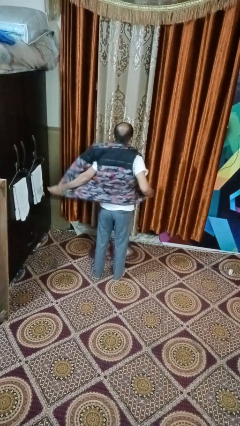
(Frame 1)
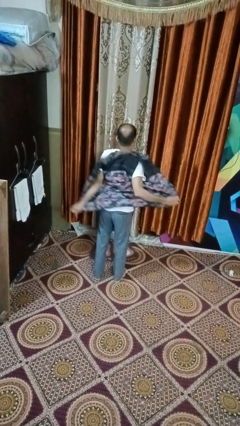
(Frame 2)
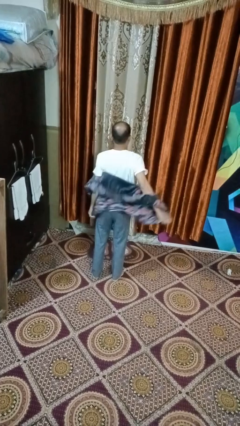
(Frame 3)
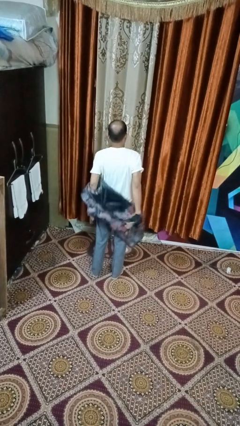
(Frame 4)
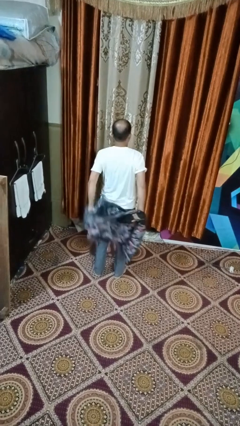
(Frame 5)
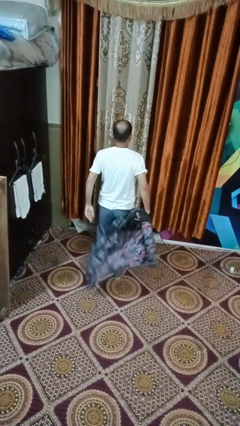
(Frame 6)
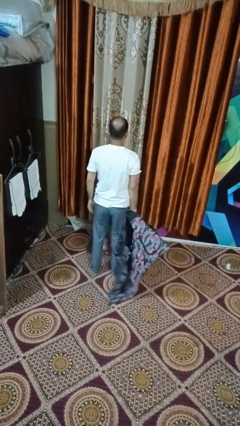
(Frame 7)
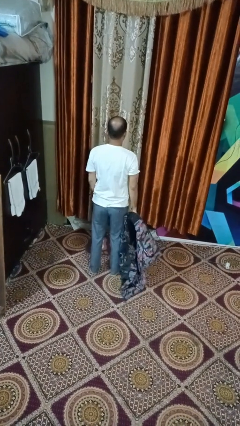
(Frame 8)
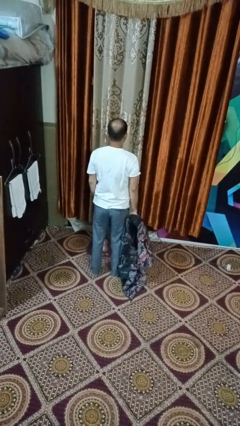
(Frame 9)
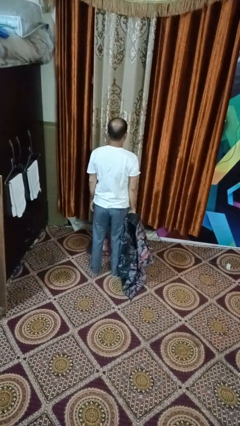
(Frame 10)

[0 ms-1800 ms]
person takes off jacket

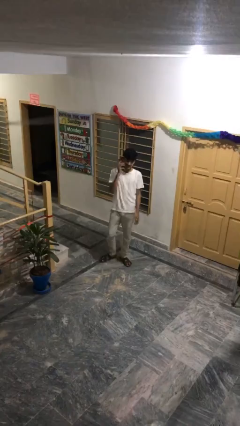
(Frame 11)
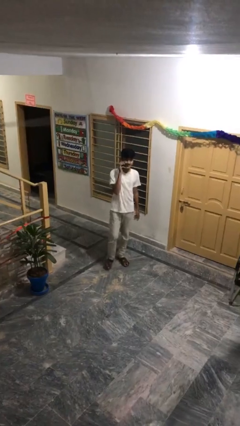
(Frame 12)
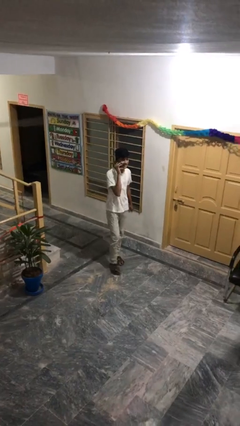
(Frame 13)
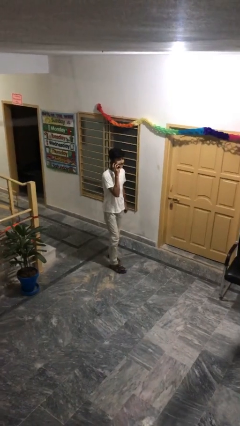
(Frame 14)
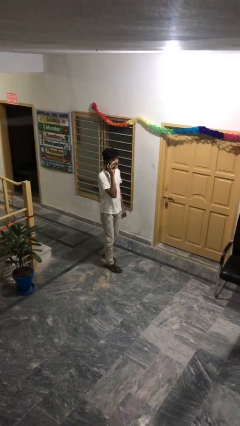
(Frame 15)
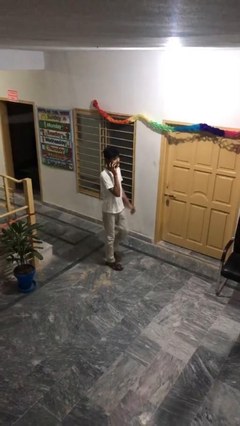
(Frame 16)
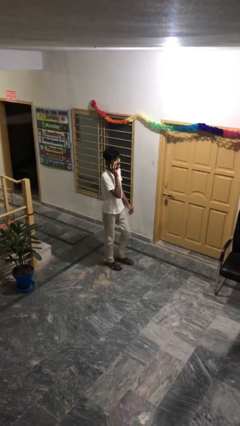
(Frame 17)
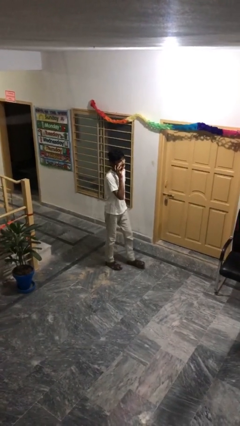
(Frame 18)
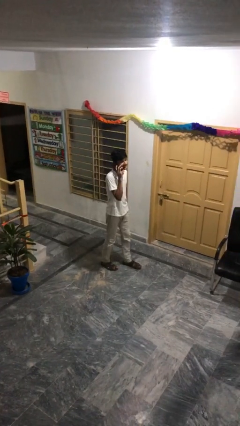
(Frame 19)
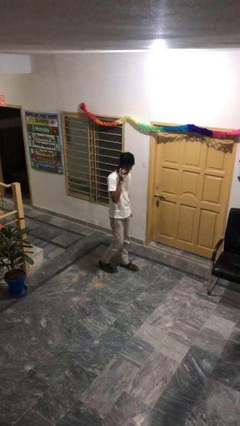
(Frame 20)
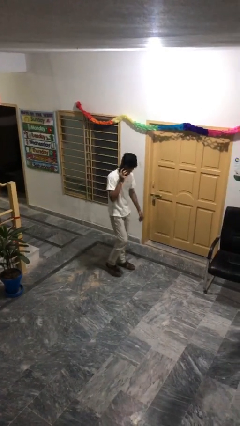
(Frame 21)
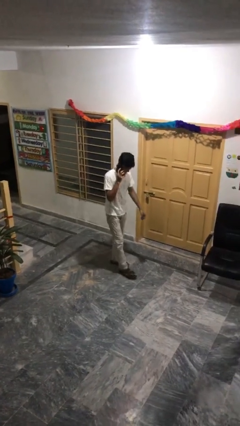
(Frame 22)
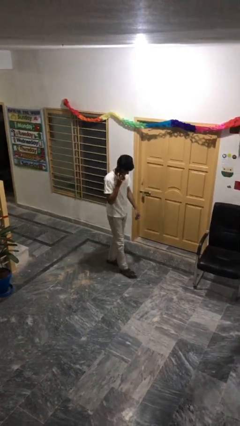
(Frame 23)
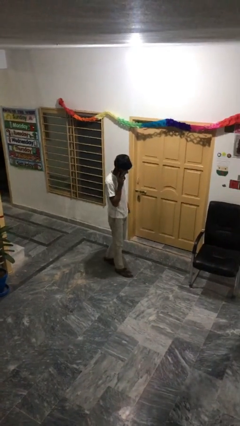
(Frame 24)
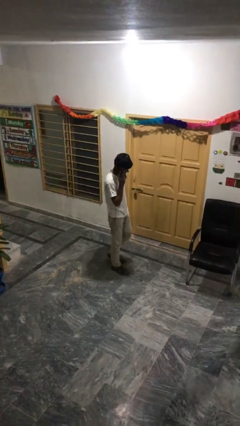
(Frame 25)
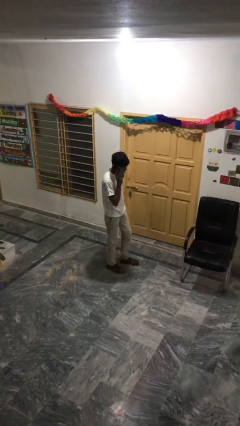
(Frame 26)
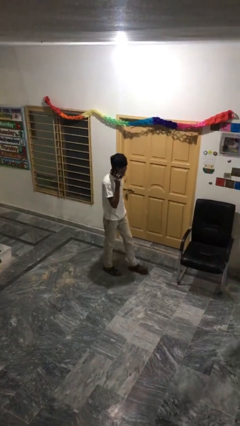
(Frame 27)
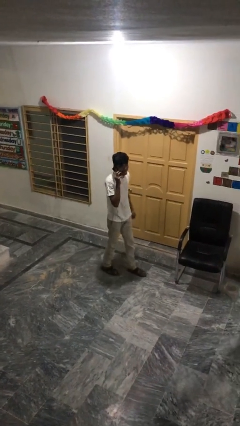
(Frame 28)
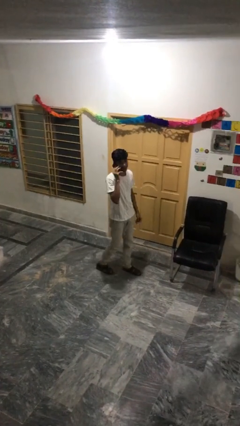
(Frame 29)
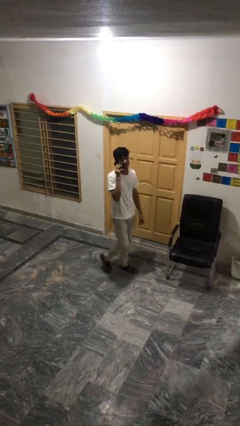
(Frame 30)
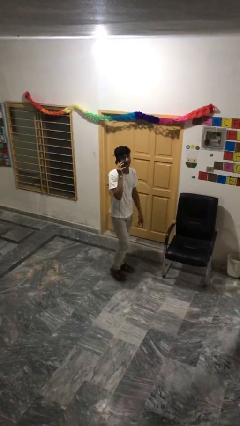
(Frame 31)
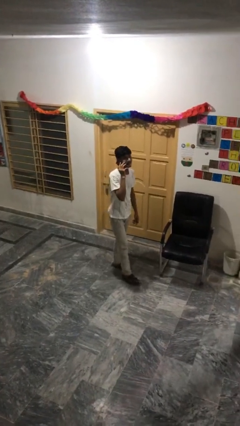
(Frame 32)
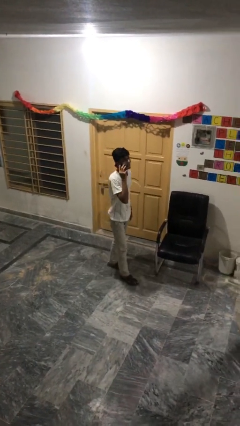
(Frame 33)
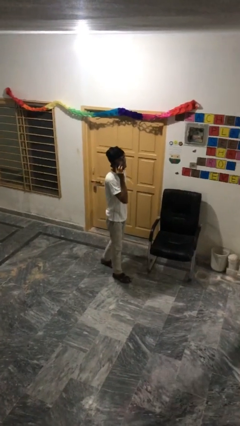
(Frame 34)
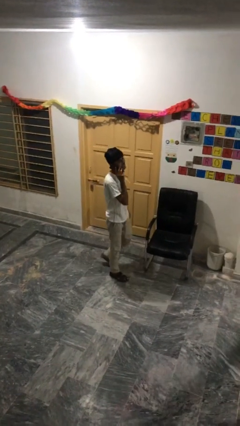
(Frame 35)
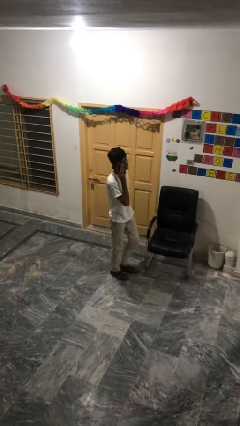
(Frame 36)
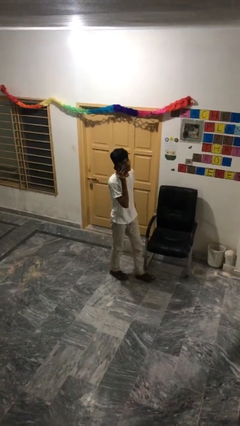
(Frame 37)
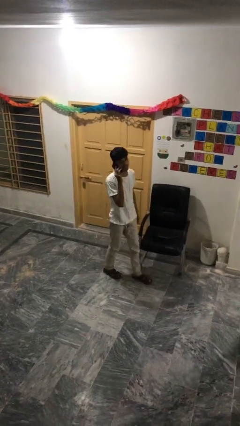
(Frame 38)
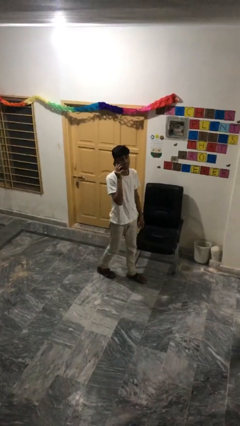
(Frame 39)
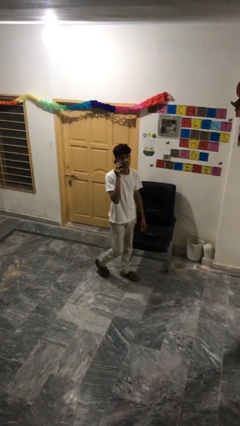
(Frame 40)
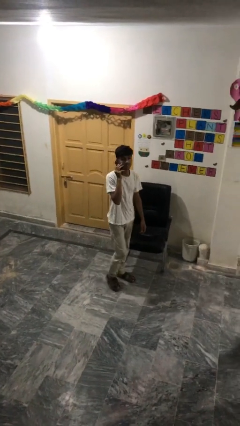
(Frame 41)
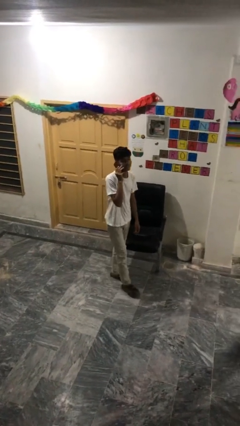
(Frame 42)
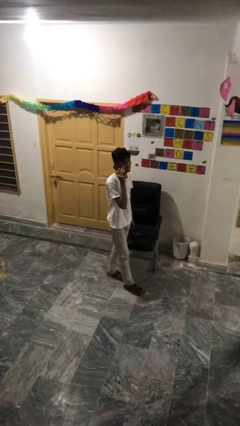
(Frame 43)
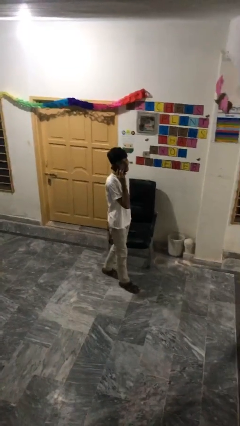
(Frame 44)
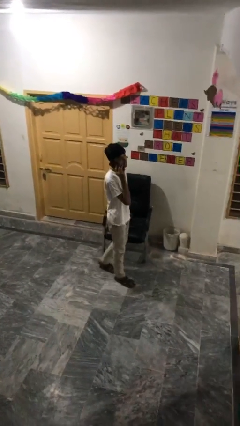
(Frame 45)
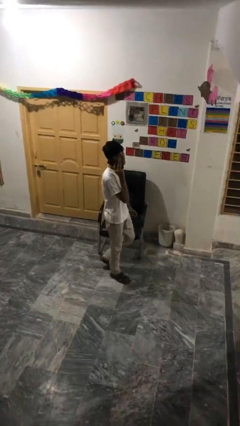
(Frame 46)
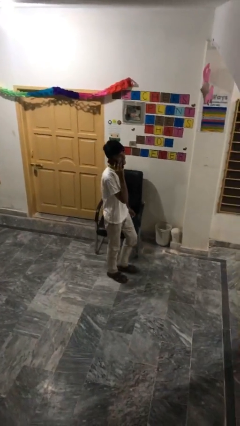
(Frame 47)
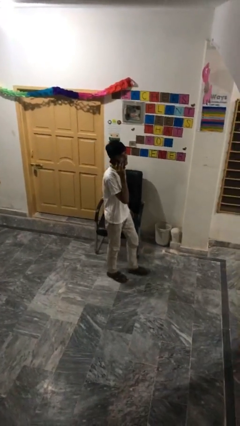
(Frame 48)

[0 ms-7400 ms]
person talks on phone

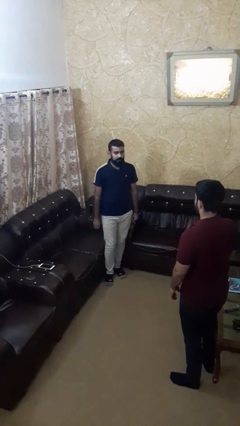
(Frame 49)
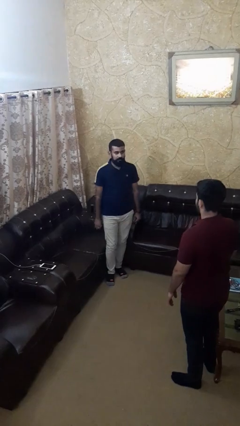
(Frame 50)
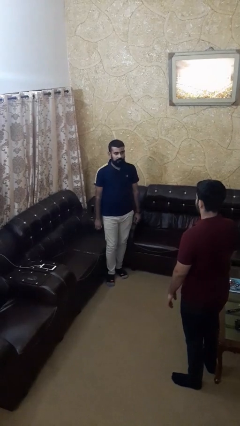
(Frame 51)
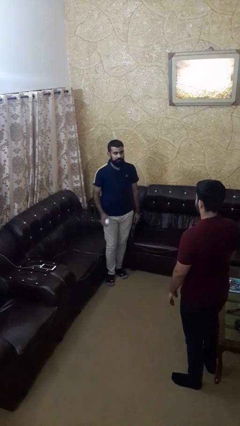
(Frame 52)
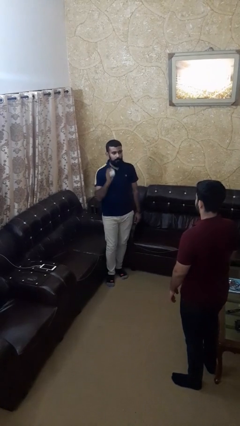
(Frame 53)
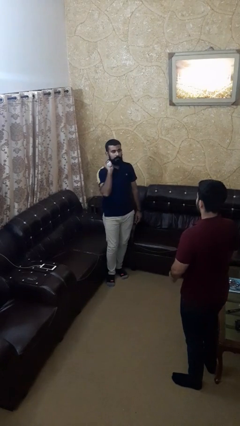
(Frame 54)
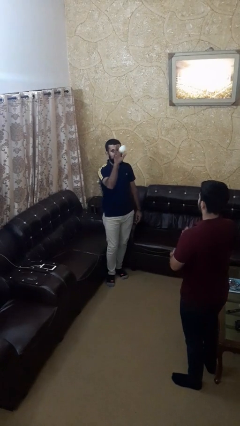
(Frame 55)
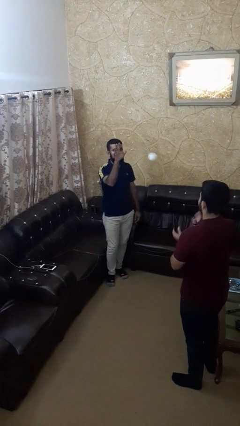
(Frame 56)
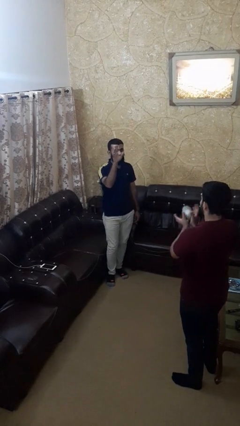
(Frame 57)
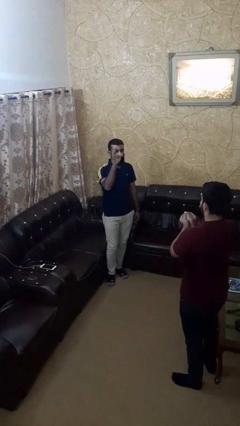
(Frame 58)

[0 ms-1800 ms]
person throws object to person

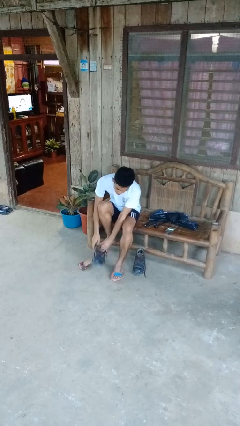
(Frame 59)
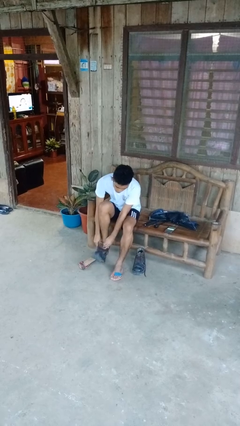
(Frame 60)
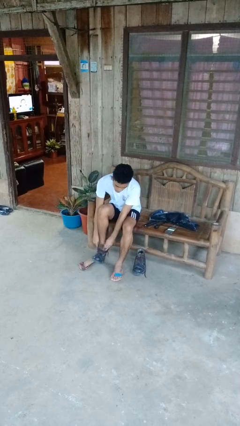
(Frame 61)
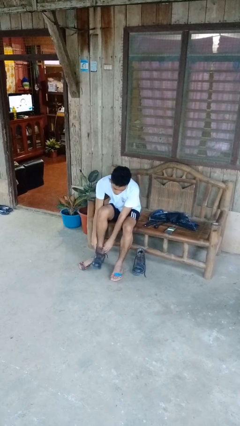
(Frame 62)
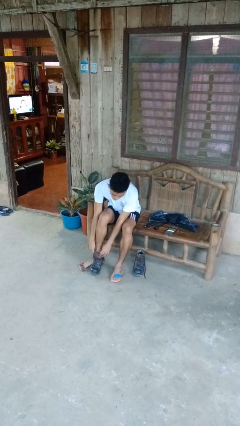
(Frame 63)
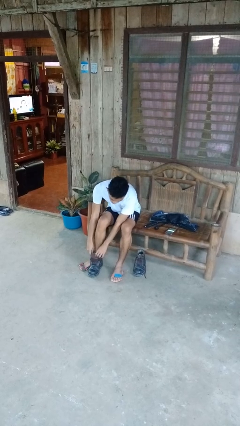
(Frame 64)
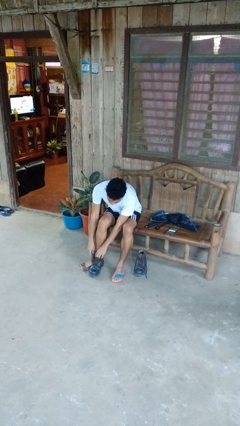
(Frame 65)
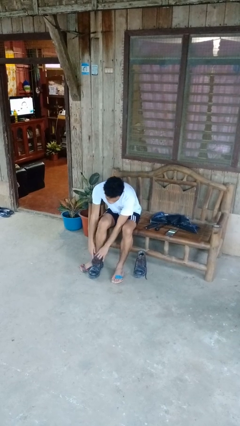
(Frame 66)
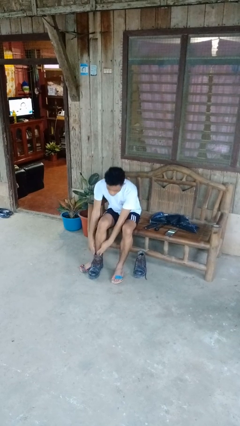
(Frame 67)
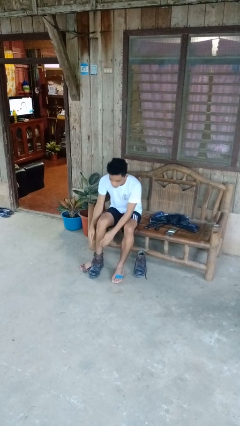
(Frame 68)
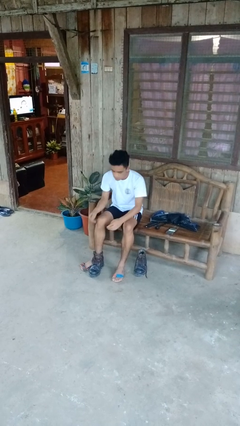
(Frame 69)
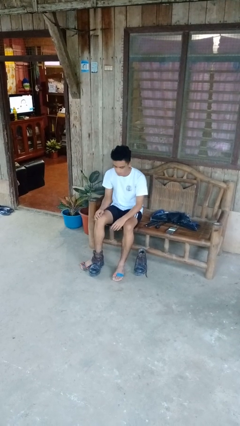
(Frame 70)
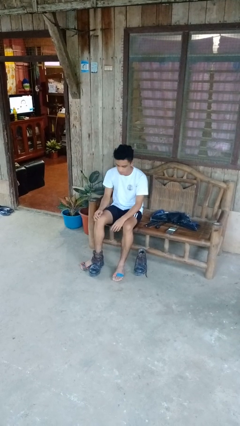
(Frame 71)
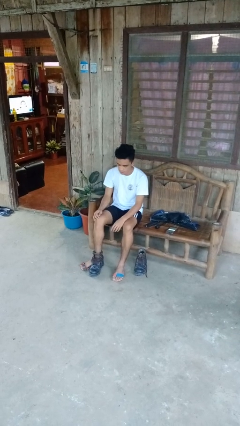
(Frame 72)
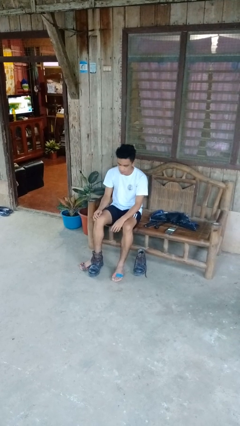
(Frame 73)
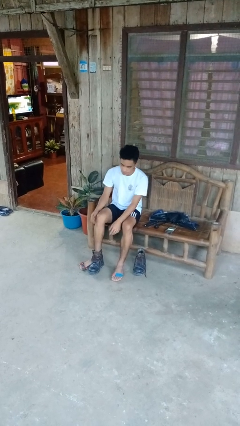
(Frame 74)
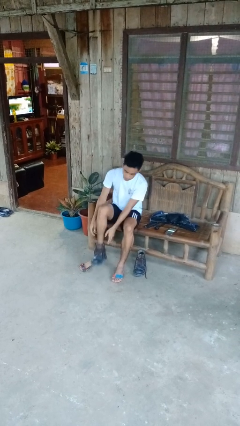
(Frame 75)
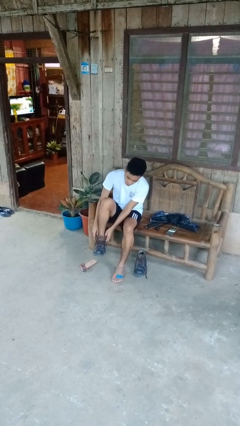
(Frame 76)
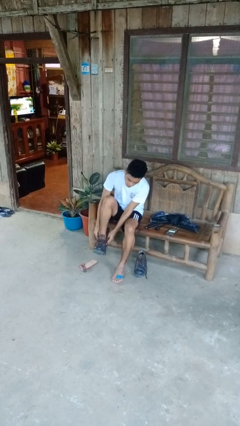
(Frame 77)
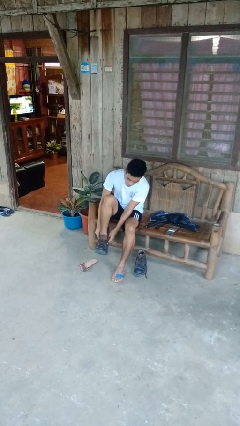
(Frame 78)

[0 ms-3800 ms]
person puts on boots

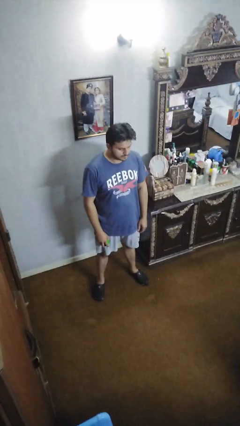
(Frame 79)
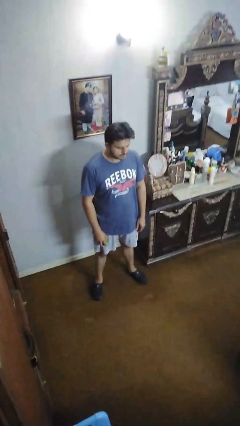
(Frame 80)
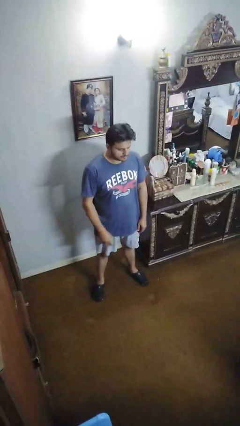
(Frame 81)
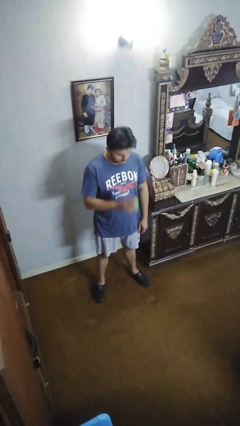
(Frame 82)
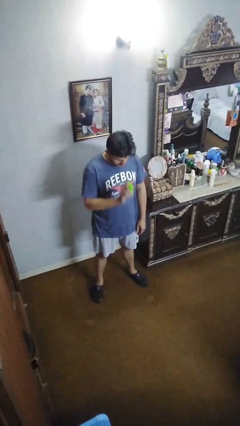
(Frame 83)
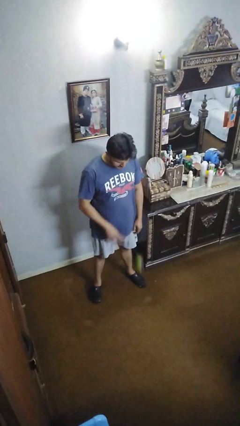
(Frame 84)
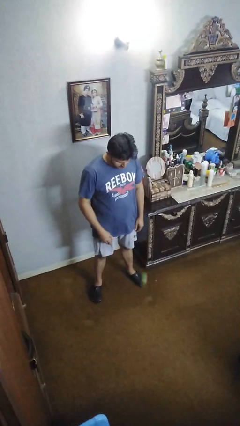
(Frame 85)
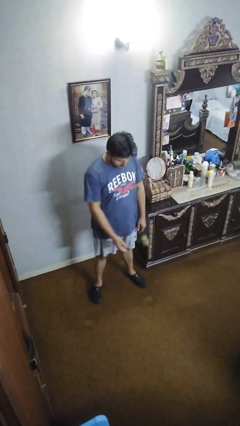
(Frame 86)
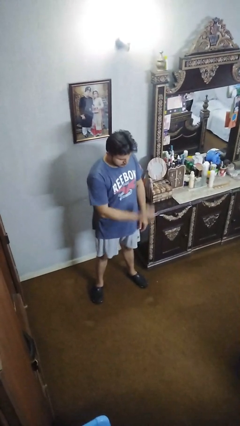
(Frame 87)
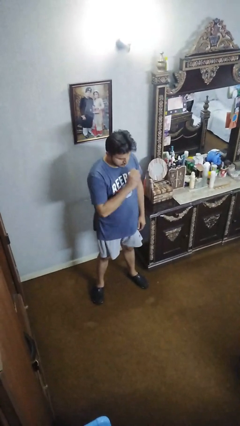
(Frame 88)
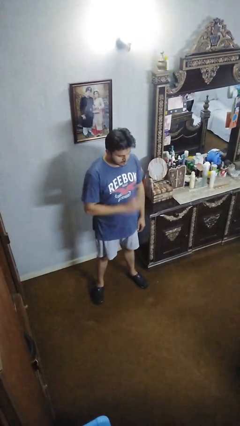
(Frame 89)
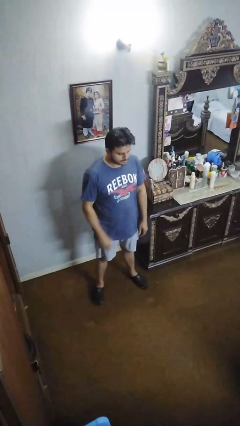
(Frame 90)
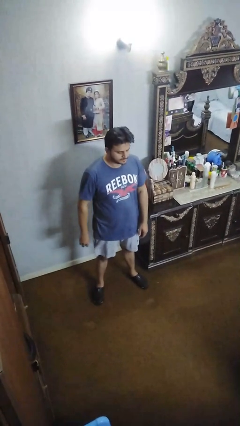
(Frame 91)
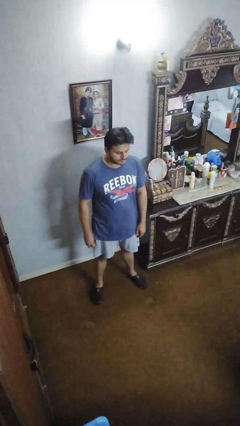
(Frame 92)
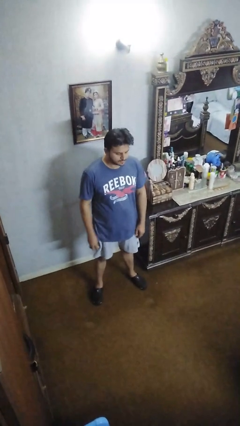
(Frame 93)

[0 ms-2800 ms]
person bounces ball on floor
